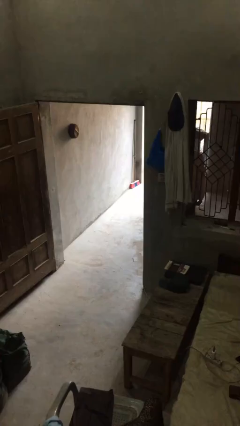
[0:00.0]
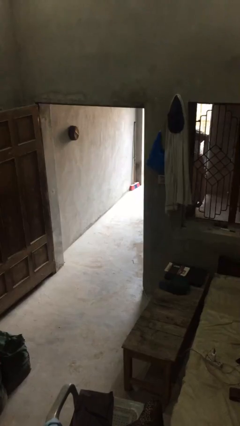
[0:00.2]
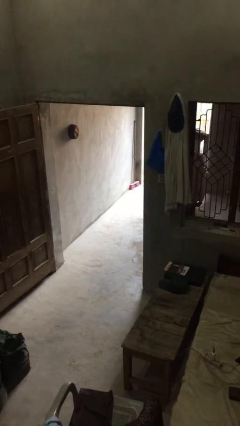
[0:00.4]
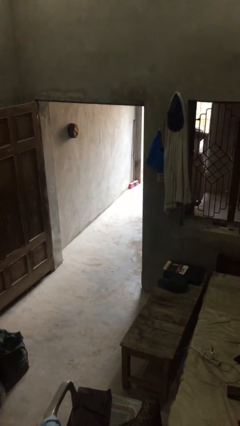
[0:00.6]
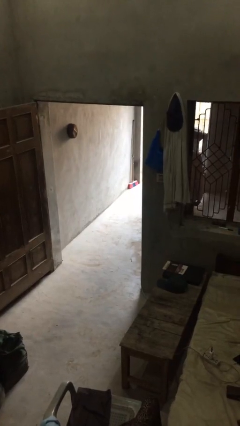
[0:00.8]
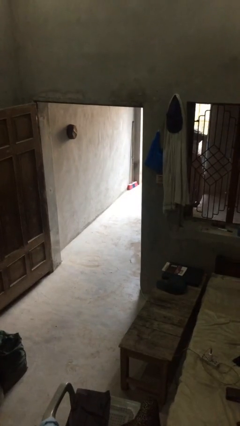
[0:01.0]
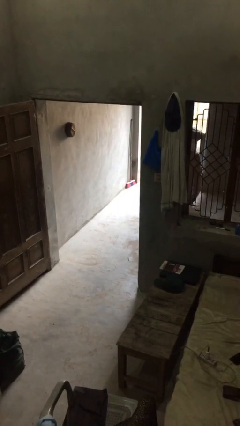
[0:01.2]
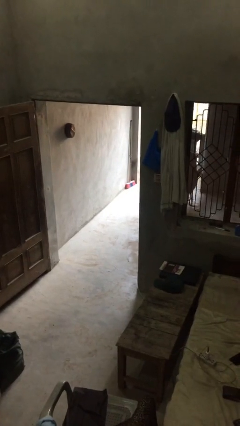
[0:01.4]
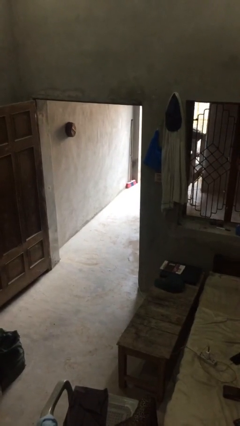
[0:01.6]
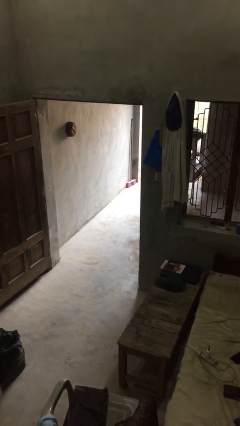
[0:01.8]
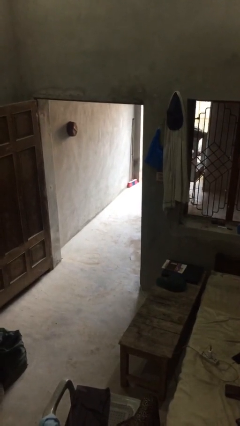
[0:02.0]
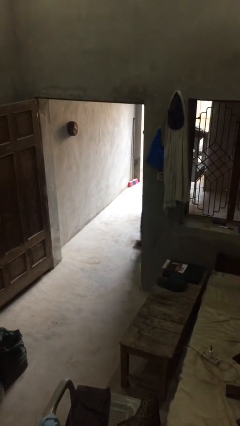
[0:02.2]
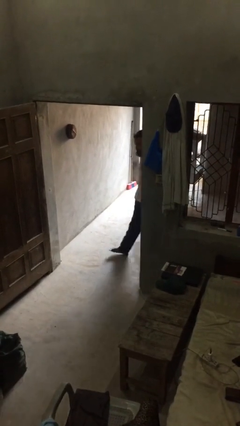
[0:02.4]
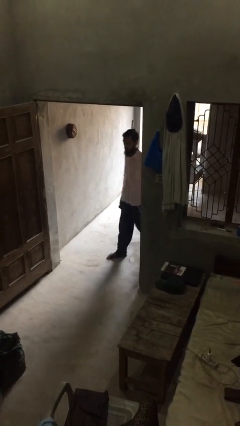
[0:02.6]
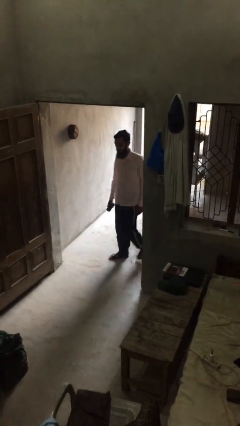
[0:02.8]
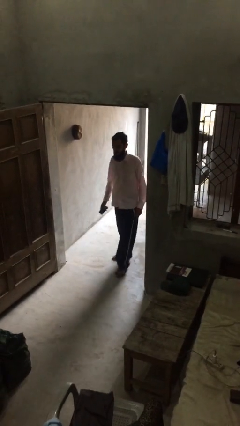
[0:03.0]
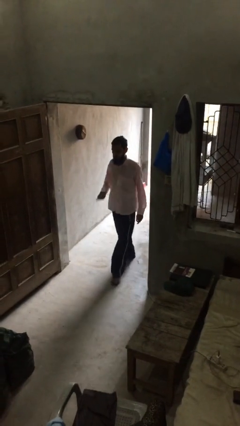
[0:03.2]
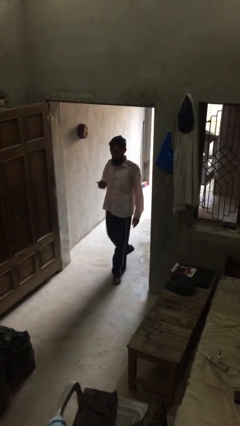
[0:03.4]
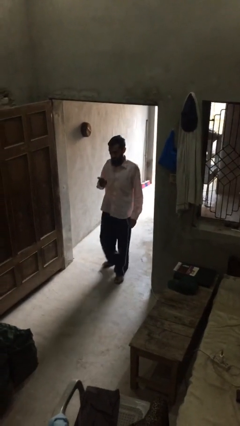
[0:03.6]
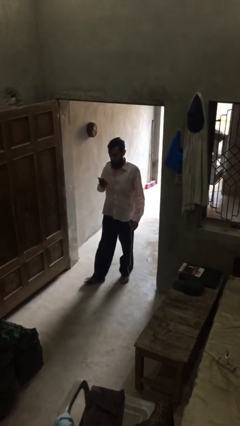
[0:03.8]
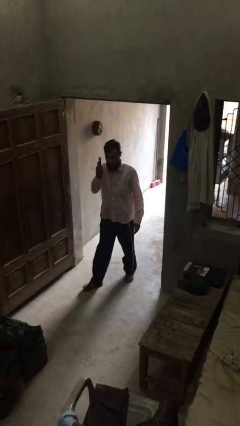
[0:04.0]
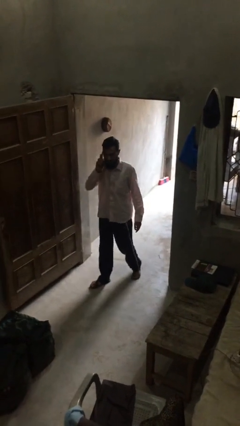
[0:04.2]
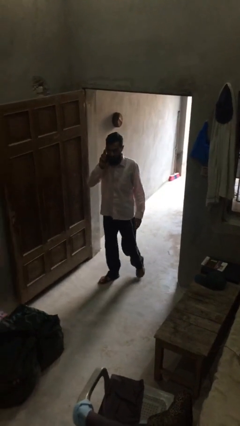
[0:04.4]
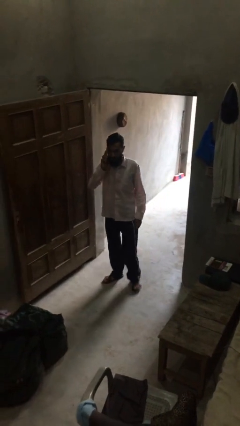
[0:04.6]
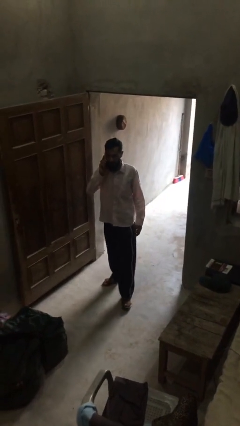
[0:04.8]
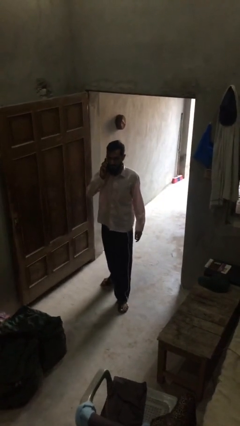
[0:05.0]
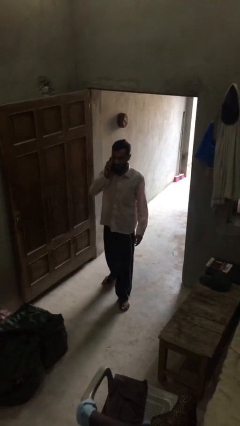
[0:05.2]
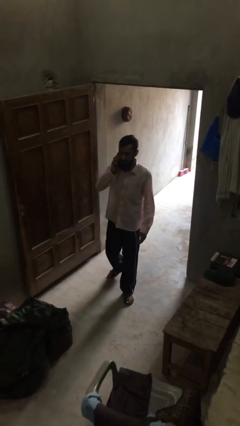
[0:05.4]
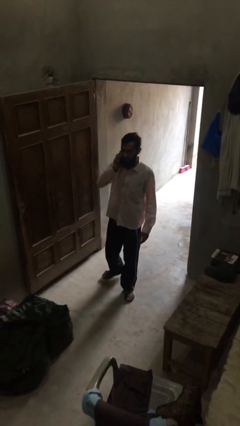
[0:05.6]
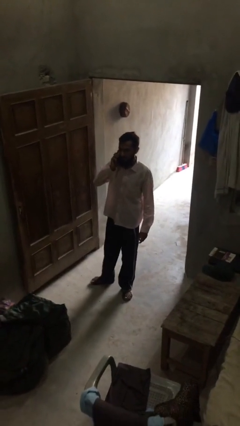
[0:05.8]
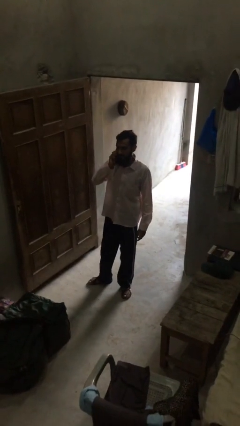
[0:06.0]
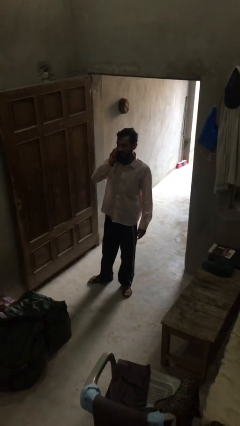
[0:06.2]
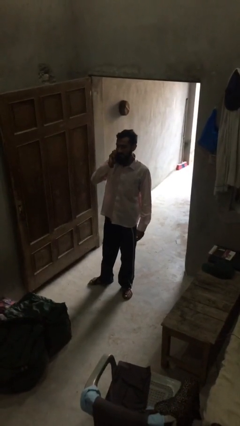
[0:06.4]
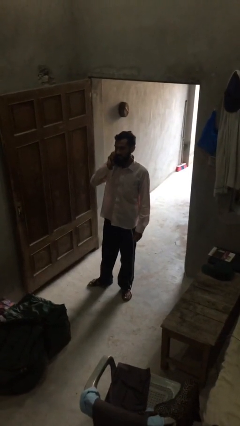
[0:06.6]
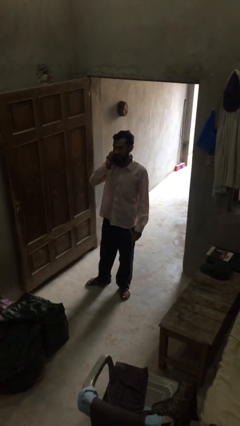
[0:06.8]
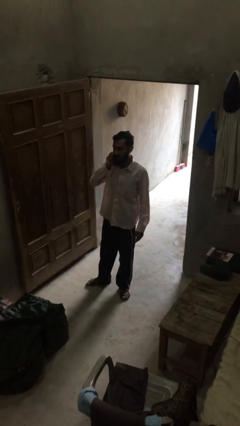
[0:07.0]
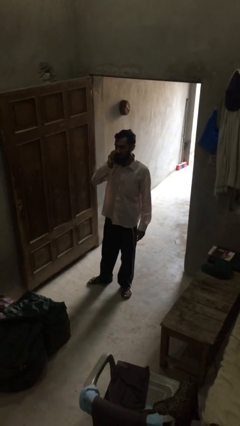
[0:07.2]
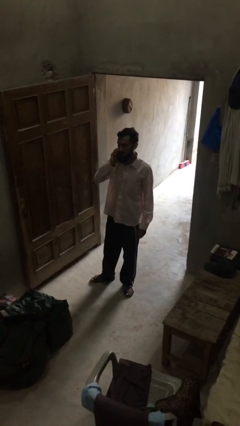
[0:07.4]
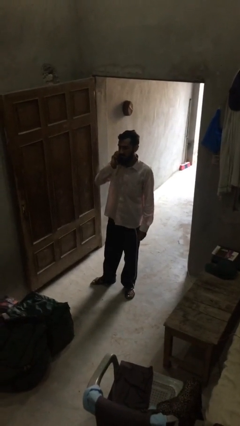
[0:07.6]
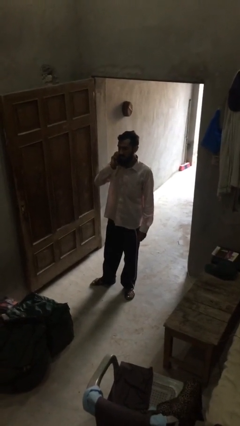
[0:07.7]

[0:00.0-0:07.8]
person enters scene through structure

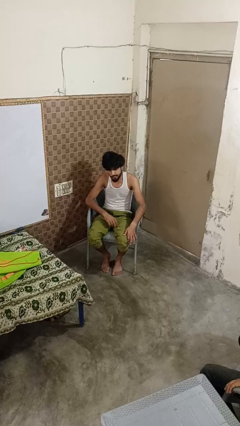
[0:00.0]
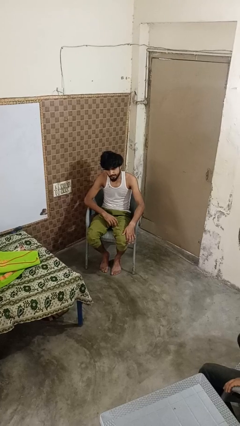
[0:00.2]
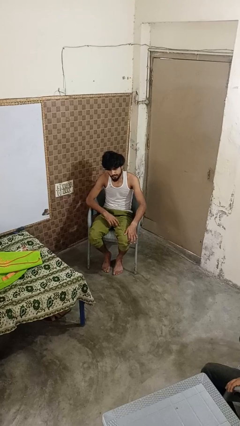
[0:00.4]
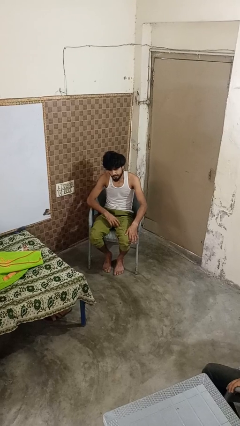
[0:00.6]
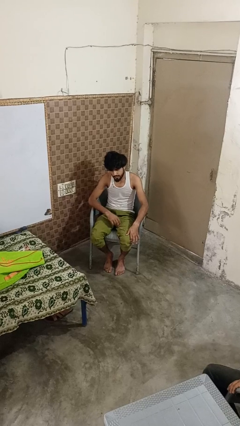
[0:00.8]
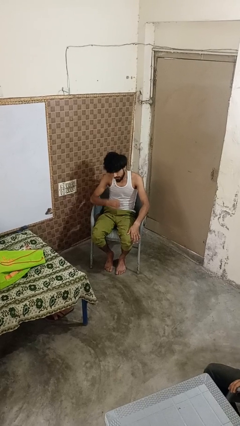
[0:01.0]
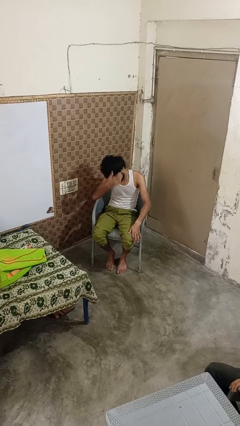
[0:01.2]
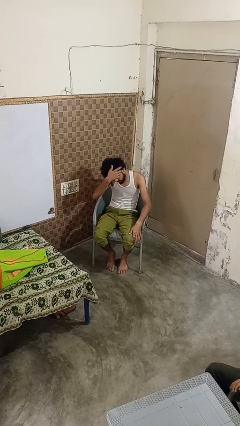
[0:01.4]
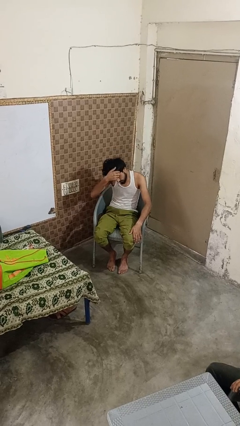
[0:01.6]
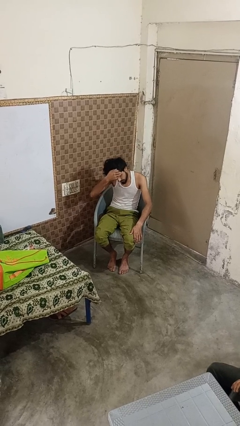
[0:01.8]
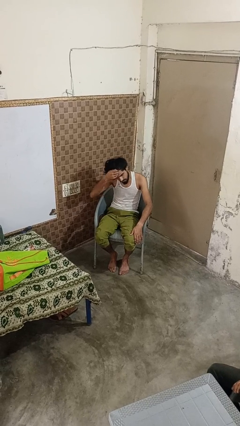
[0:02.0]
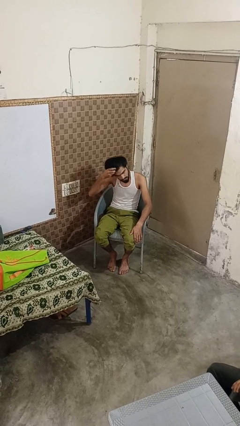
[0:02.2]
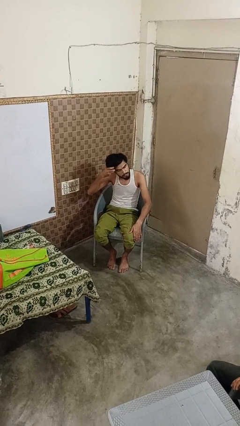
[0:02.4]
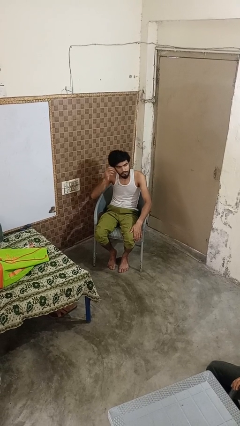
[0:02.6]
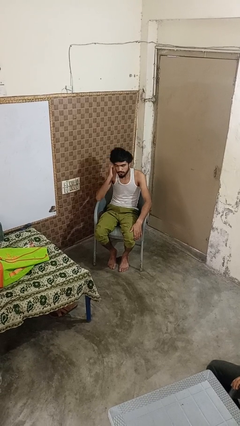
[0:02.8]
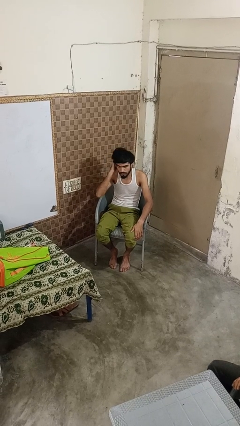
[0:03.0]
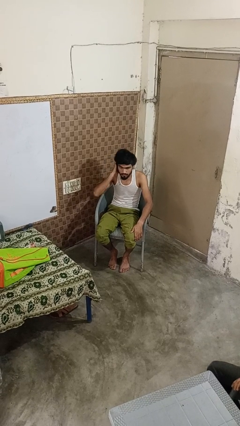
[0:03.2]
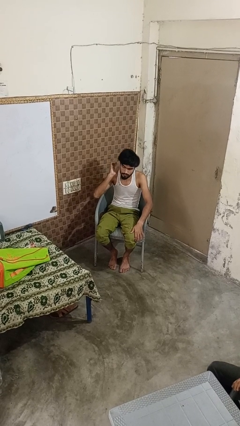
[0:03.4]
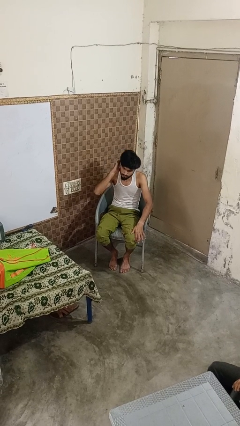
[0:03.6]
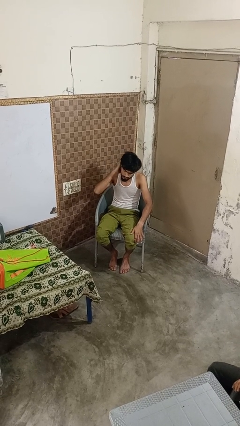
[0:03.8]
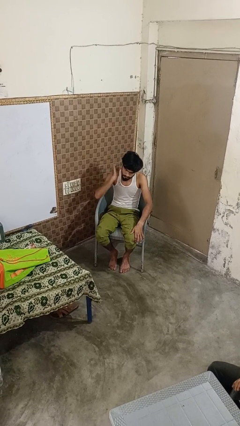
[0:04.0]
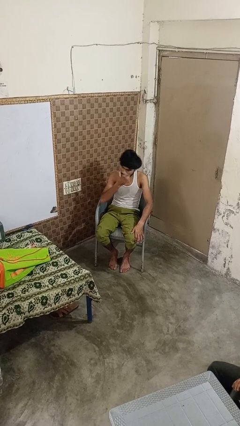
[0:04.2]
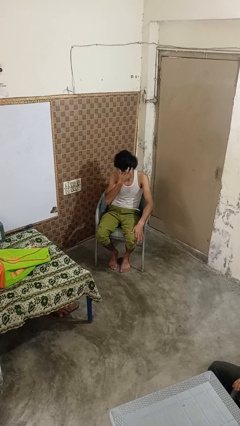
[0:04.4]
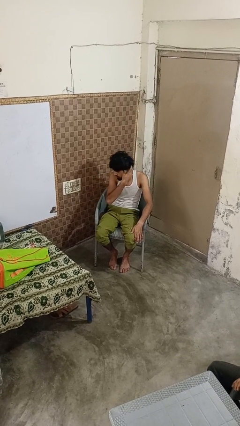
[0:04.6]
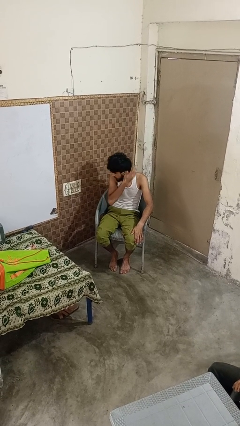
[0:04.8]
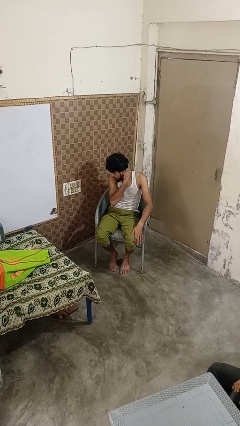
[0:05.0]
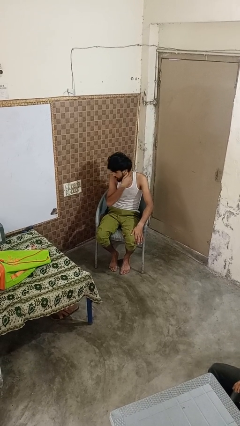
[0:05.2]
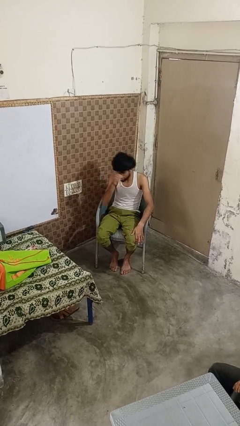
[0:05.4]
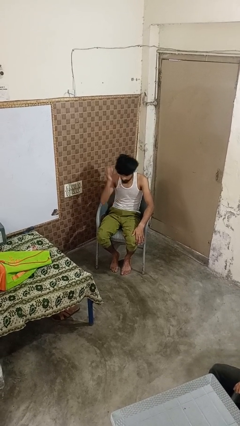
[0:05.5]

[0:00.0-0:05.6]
person strokes hair

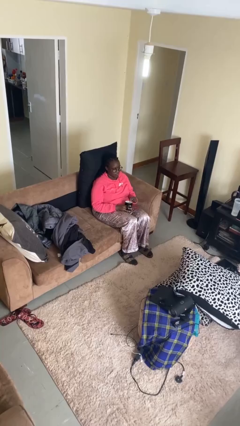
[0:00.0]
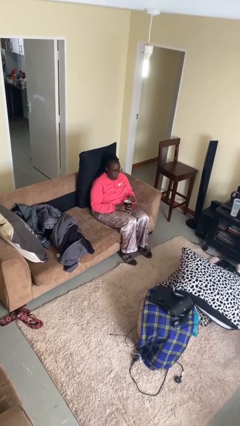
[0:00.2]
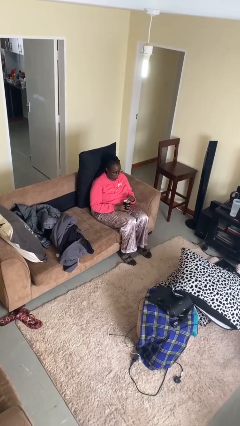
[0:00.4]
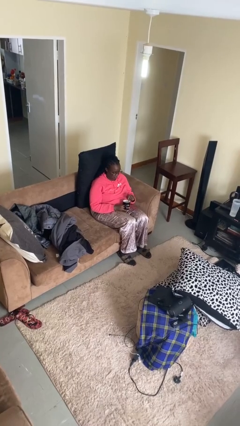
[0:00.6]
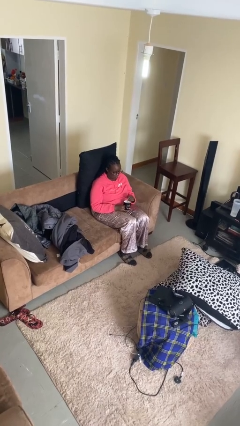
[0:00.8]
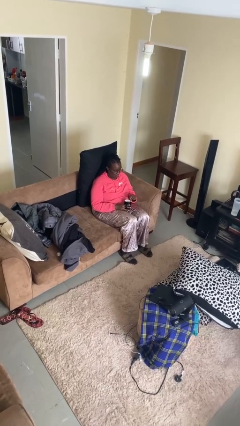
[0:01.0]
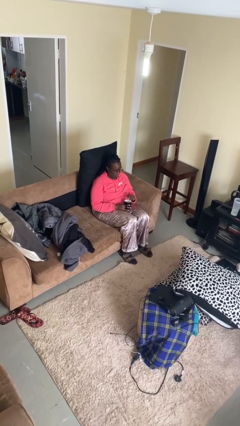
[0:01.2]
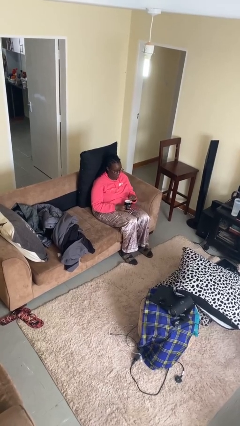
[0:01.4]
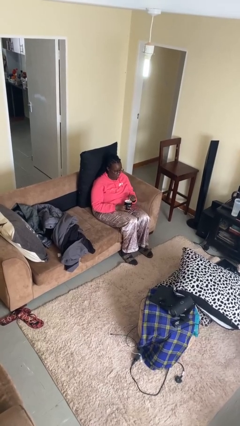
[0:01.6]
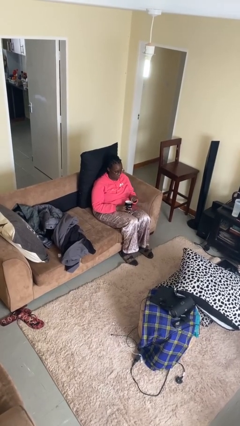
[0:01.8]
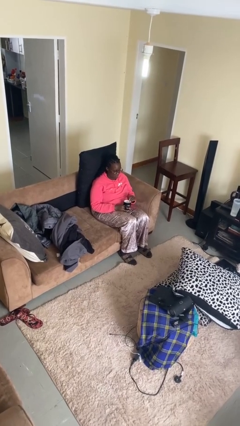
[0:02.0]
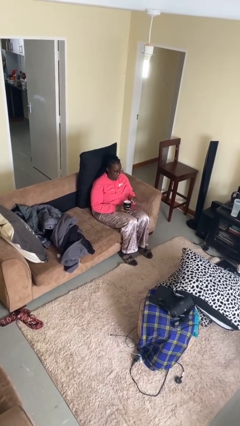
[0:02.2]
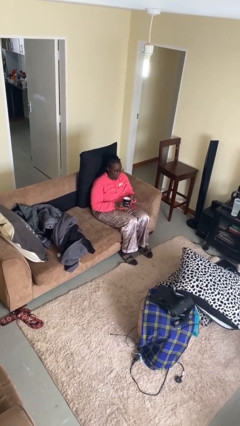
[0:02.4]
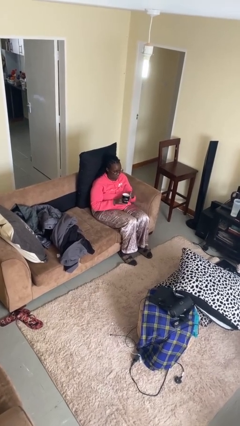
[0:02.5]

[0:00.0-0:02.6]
person stirs mug

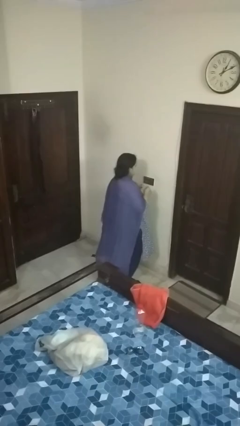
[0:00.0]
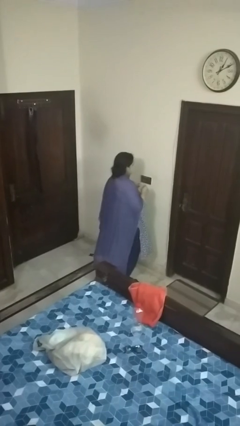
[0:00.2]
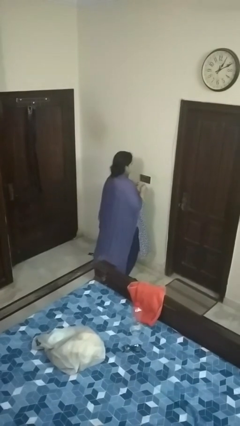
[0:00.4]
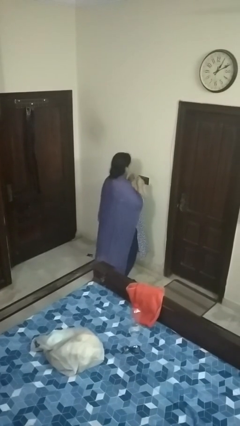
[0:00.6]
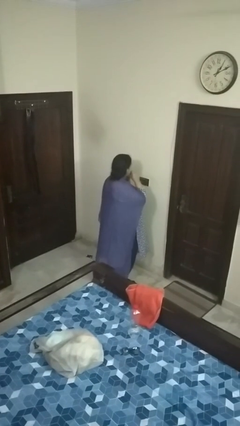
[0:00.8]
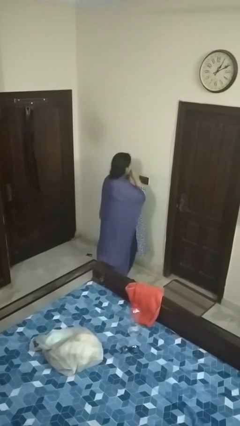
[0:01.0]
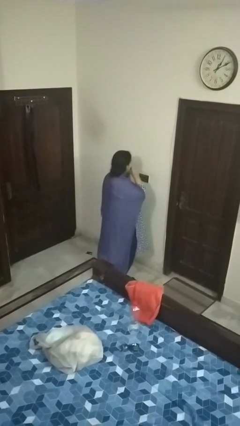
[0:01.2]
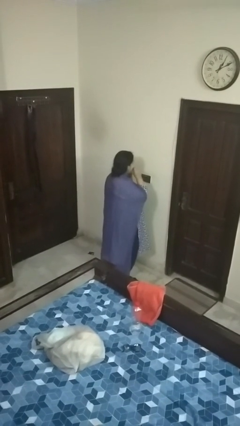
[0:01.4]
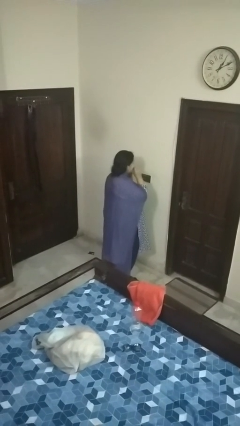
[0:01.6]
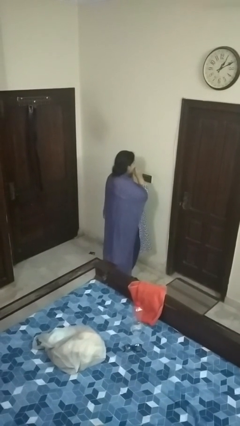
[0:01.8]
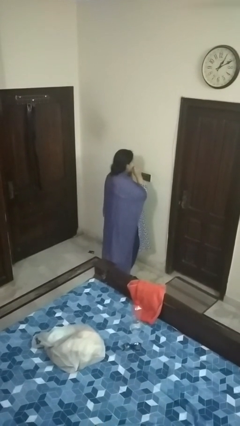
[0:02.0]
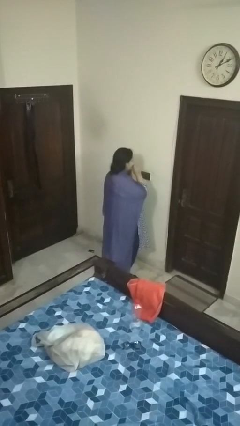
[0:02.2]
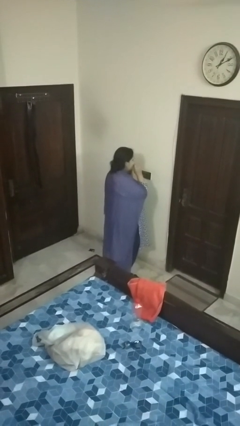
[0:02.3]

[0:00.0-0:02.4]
person flosses
